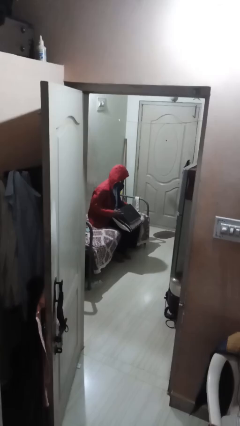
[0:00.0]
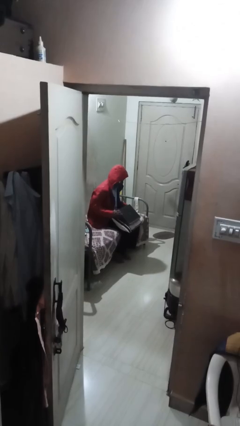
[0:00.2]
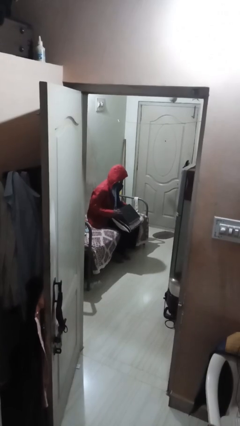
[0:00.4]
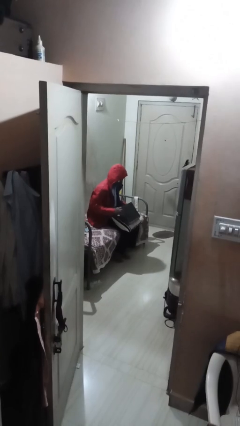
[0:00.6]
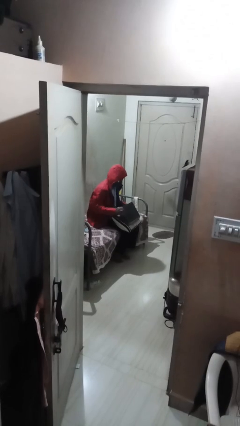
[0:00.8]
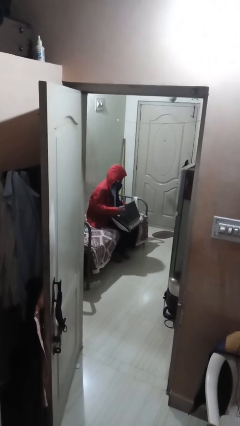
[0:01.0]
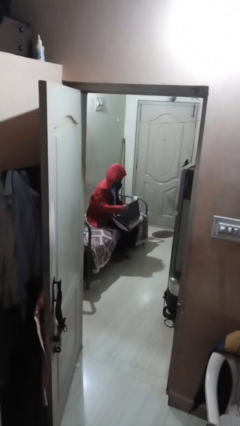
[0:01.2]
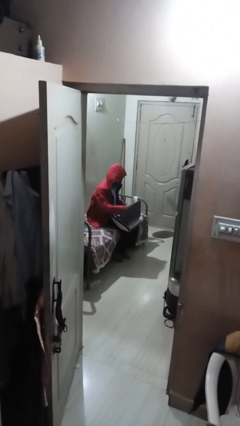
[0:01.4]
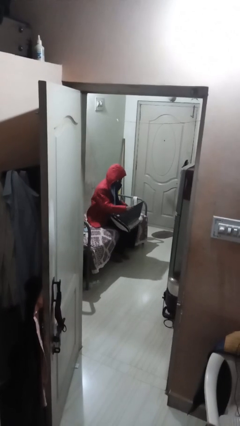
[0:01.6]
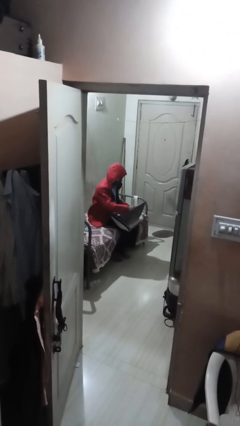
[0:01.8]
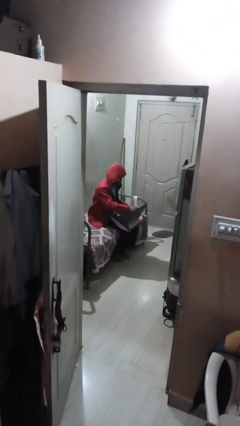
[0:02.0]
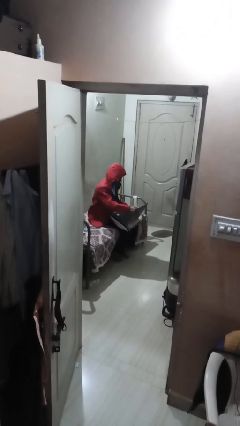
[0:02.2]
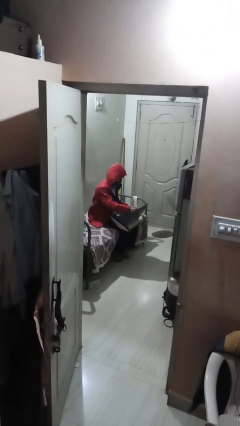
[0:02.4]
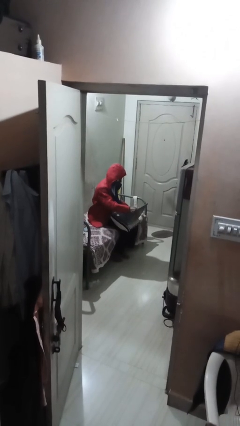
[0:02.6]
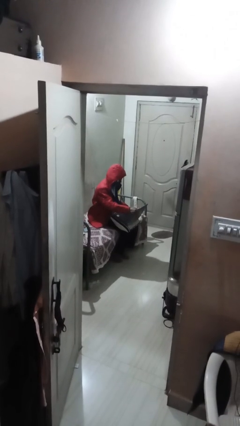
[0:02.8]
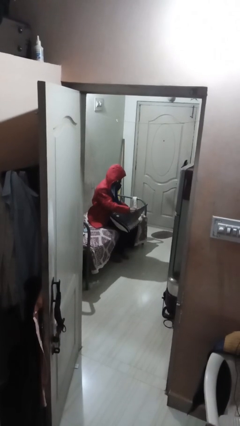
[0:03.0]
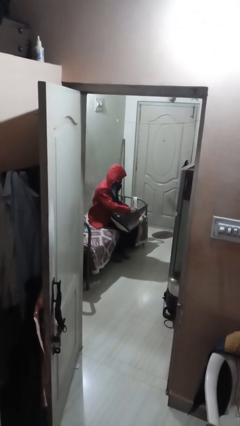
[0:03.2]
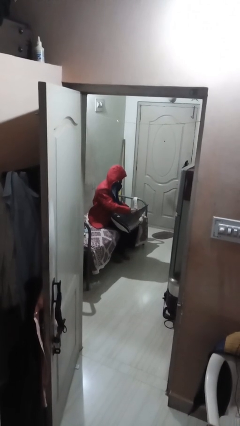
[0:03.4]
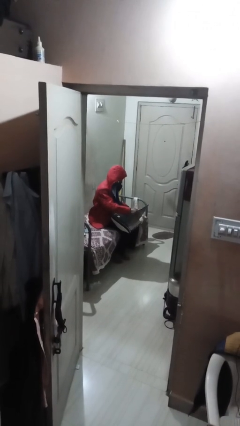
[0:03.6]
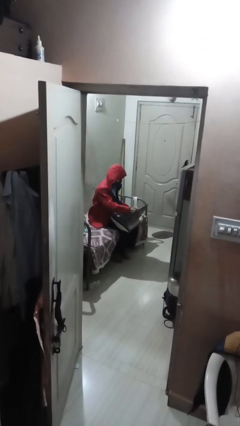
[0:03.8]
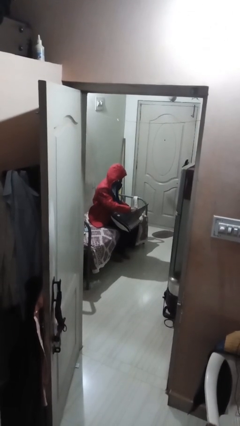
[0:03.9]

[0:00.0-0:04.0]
person interacts with laptop

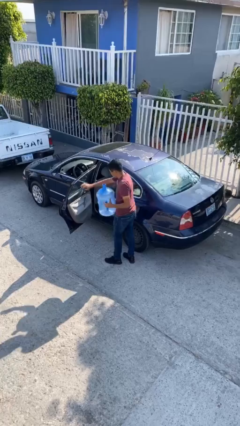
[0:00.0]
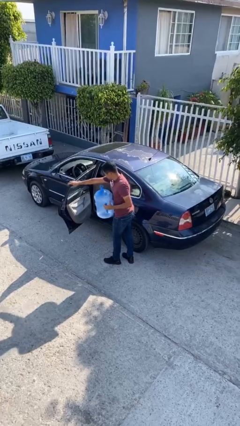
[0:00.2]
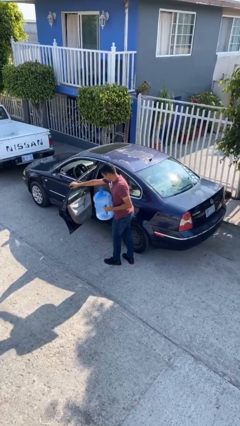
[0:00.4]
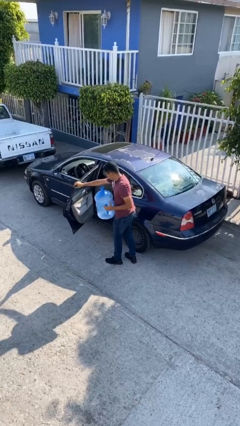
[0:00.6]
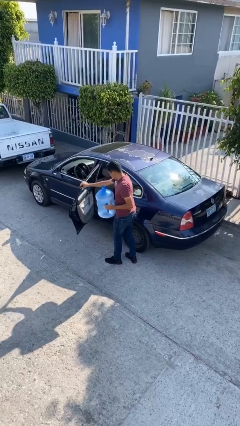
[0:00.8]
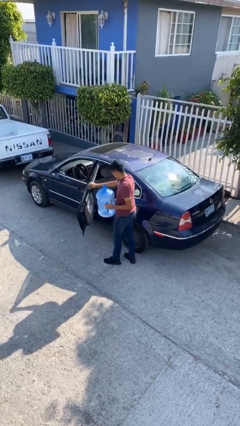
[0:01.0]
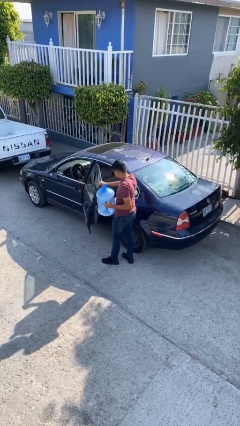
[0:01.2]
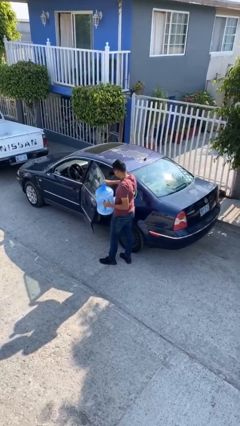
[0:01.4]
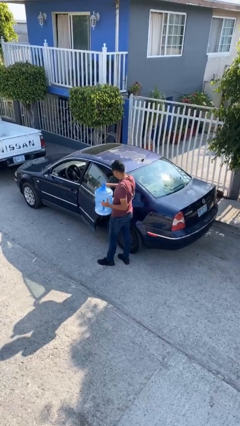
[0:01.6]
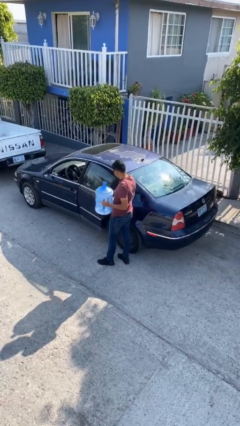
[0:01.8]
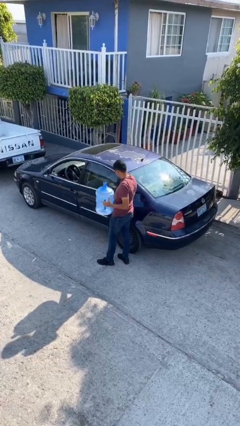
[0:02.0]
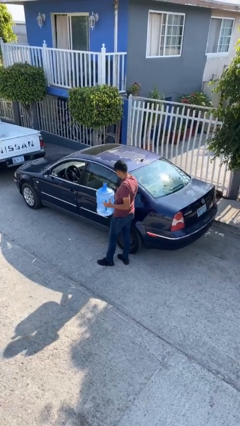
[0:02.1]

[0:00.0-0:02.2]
person closes car door

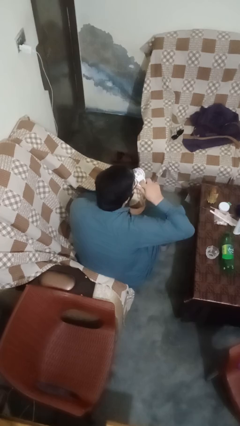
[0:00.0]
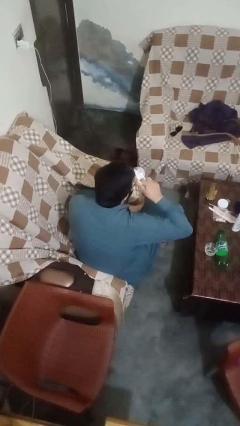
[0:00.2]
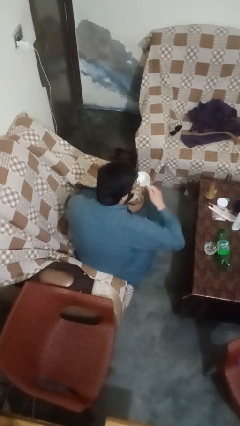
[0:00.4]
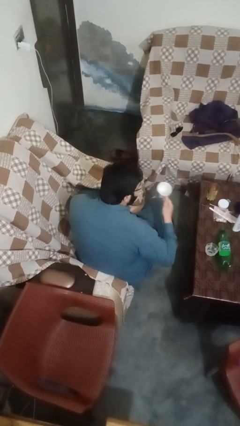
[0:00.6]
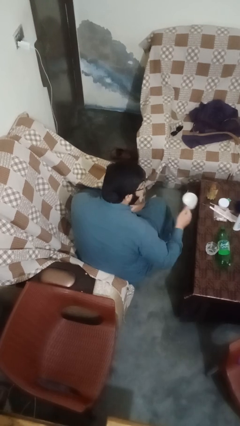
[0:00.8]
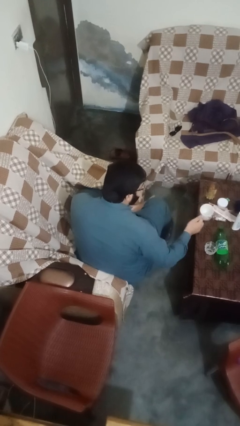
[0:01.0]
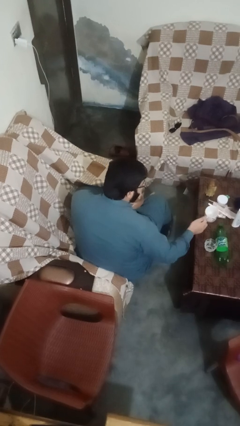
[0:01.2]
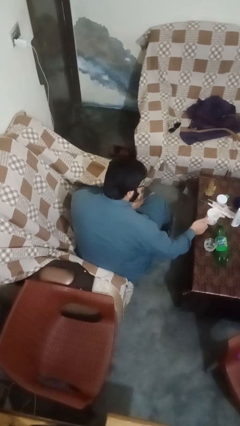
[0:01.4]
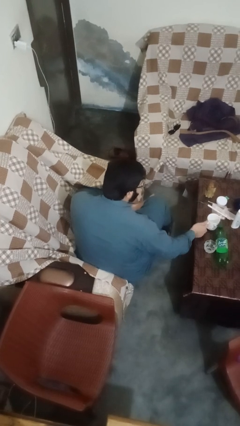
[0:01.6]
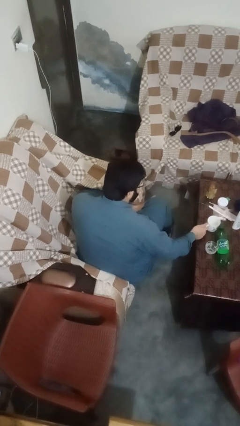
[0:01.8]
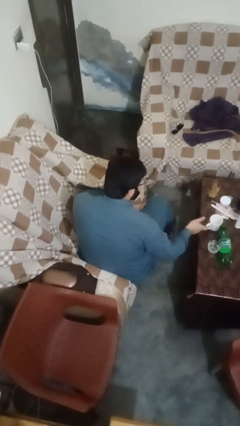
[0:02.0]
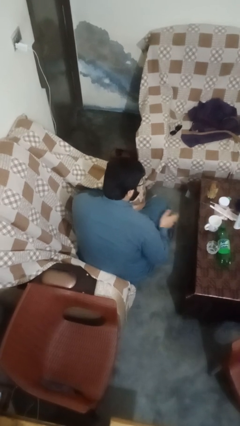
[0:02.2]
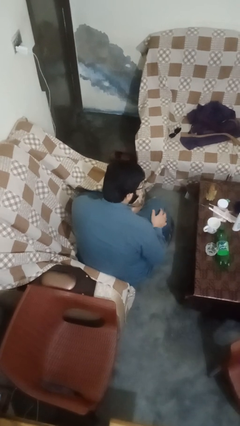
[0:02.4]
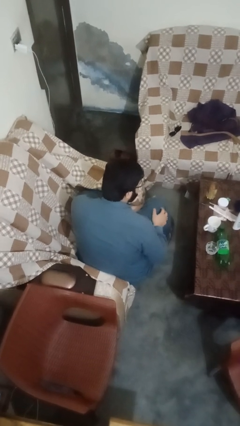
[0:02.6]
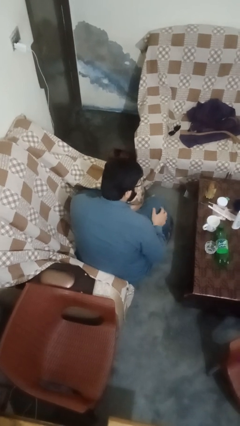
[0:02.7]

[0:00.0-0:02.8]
person puts down object on table

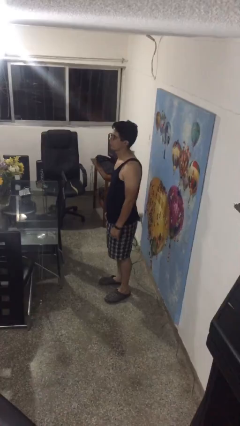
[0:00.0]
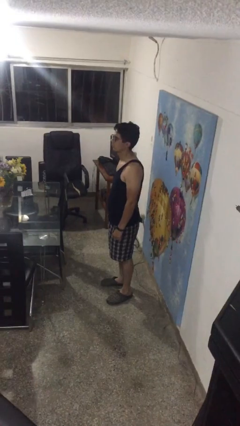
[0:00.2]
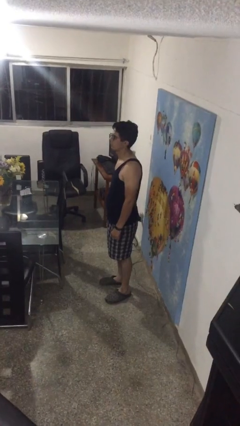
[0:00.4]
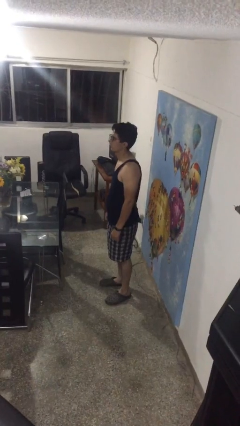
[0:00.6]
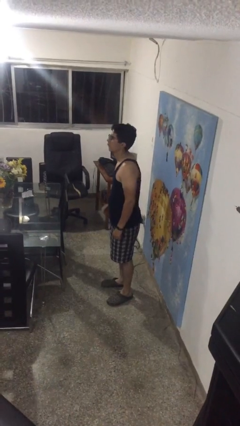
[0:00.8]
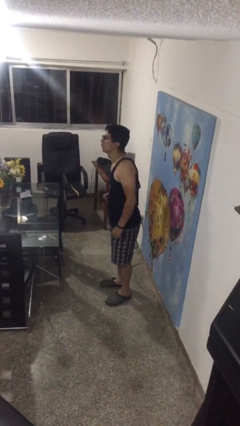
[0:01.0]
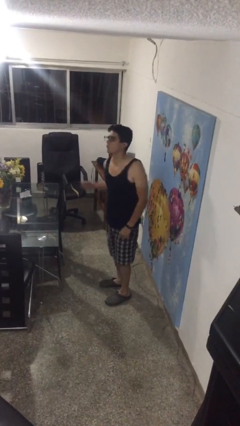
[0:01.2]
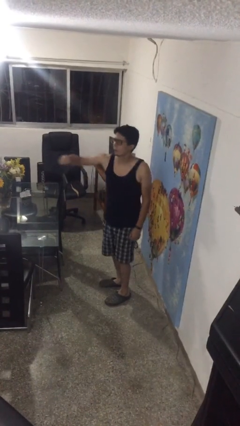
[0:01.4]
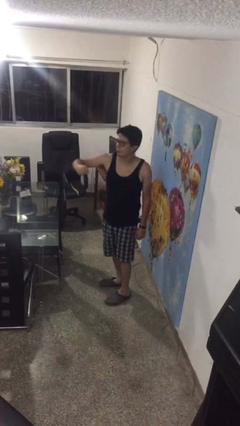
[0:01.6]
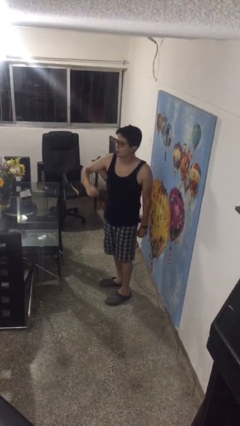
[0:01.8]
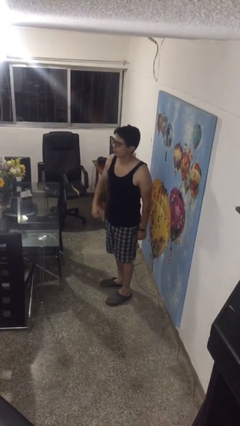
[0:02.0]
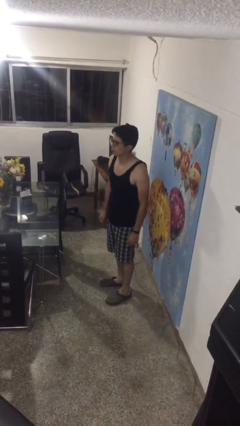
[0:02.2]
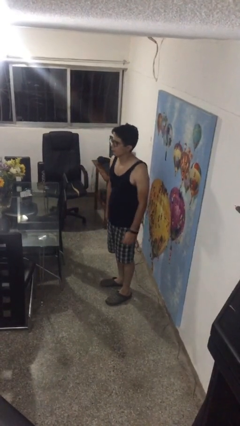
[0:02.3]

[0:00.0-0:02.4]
person punches

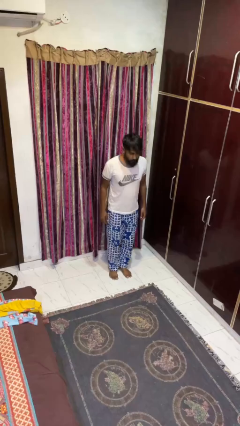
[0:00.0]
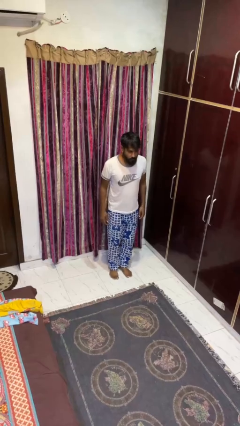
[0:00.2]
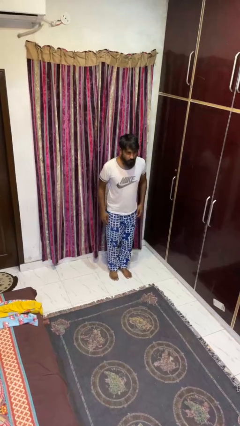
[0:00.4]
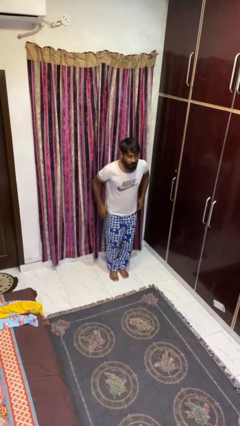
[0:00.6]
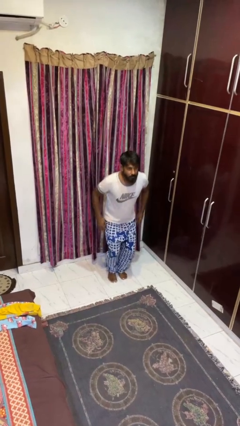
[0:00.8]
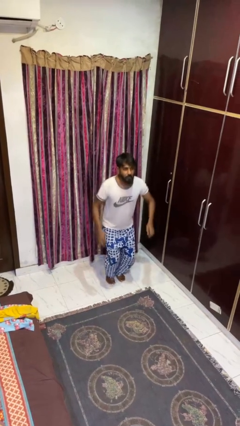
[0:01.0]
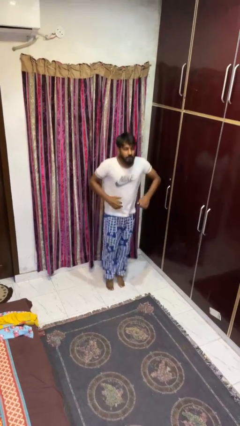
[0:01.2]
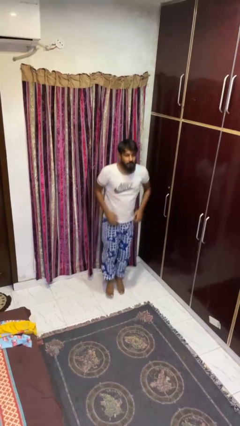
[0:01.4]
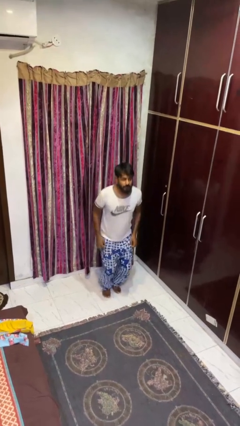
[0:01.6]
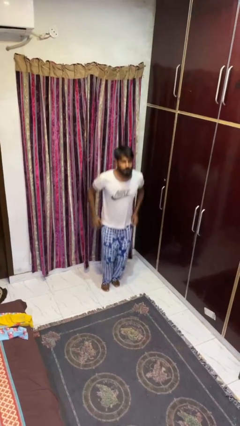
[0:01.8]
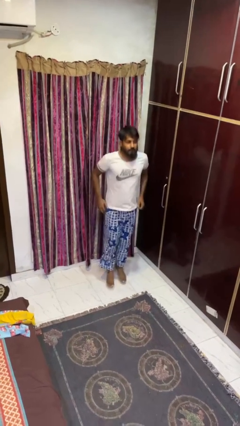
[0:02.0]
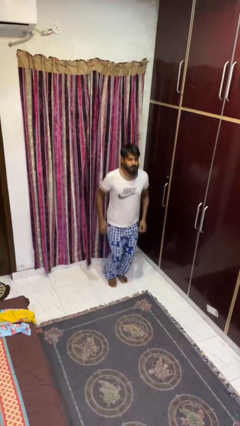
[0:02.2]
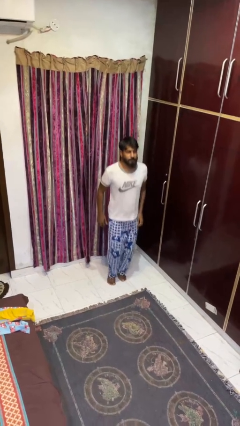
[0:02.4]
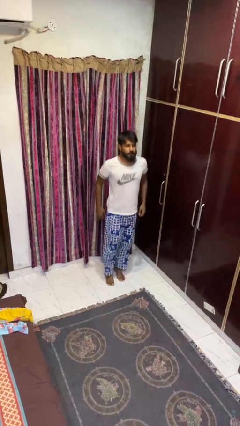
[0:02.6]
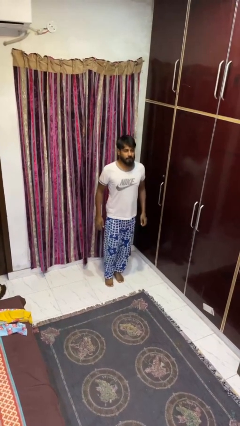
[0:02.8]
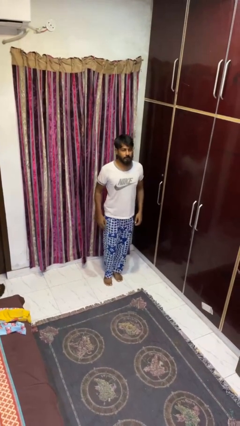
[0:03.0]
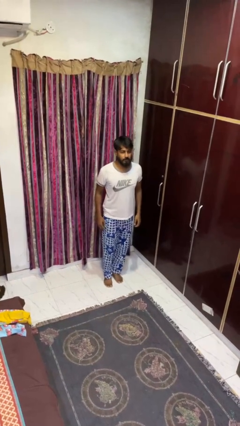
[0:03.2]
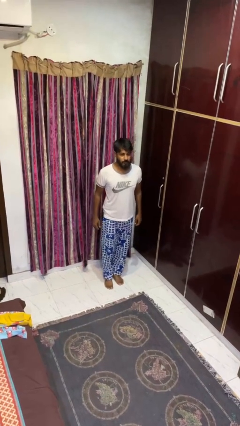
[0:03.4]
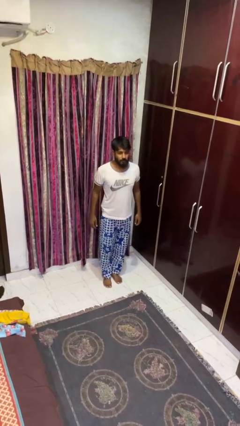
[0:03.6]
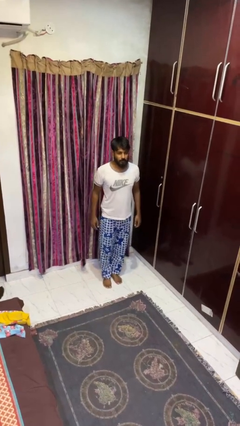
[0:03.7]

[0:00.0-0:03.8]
person jumps

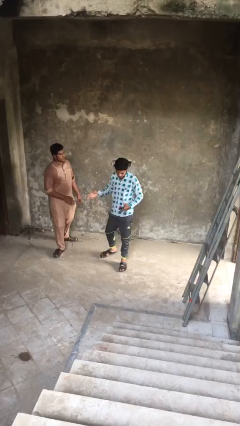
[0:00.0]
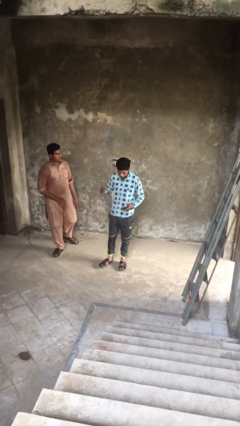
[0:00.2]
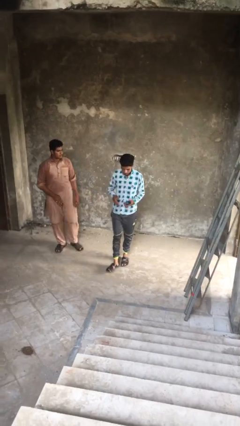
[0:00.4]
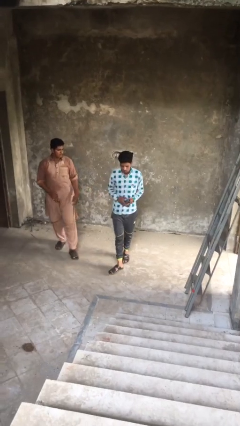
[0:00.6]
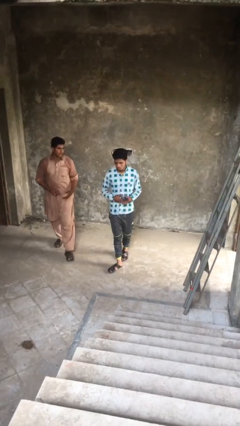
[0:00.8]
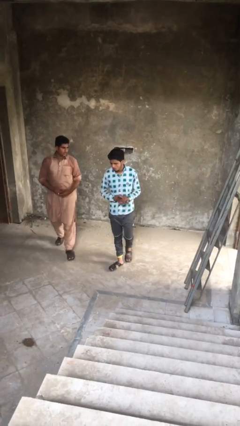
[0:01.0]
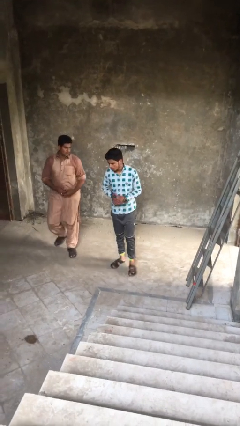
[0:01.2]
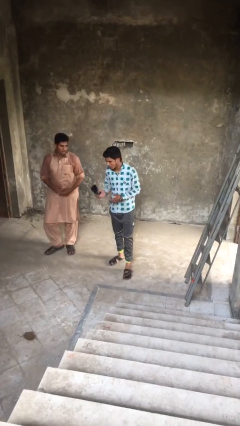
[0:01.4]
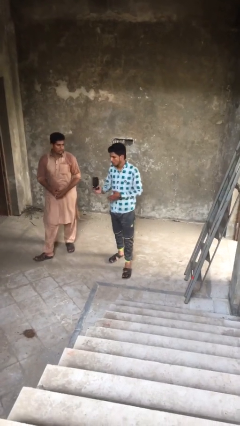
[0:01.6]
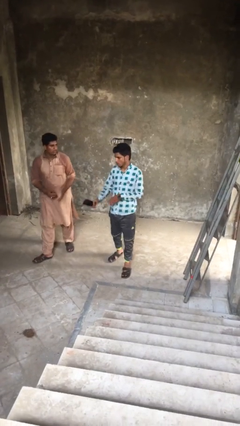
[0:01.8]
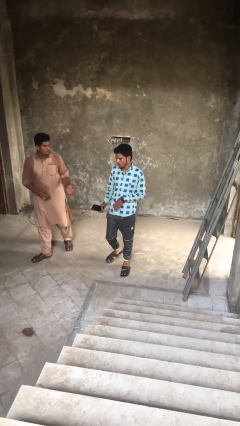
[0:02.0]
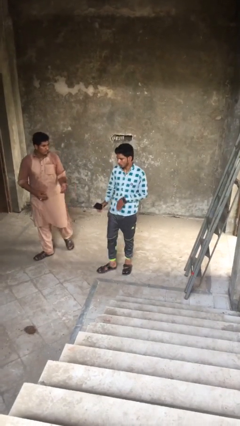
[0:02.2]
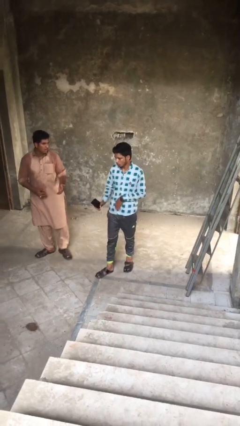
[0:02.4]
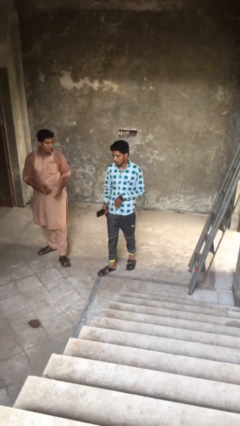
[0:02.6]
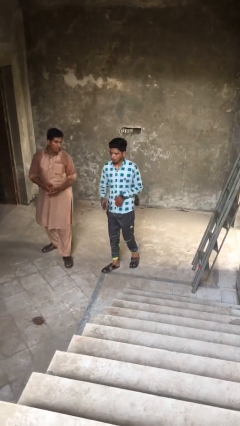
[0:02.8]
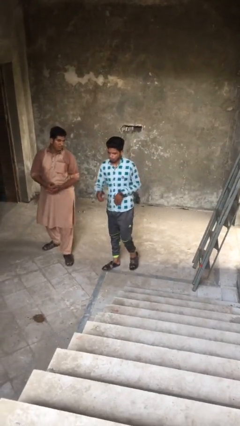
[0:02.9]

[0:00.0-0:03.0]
person talks to person
